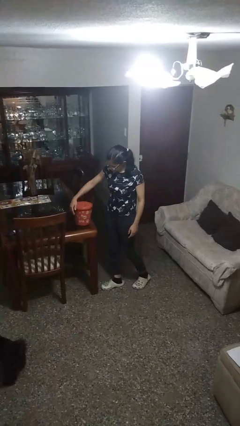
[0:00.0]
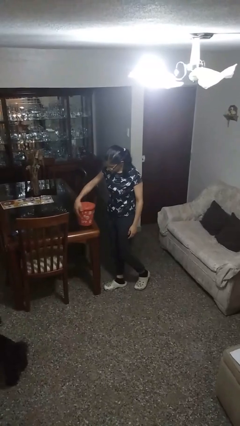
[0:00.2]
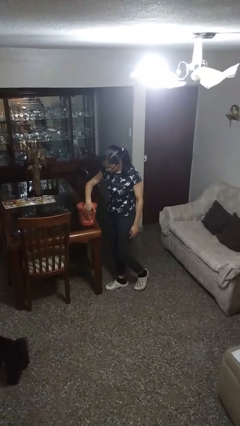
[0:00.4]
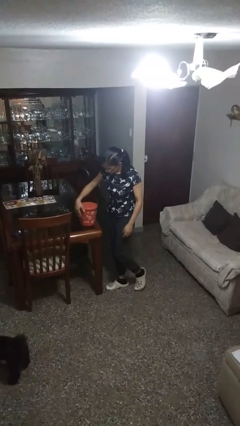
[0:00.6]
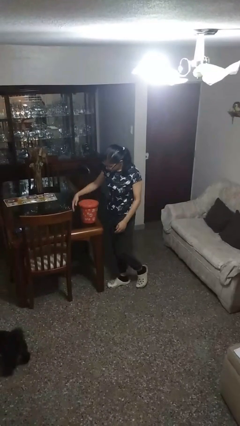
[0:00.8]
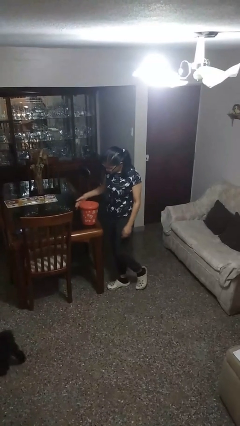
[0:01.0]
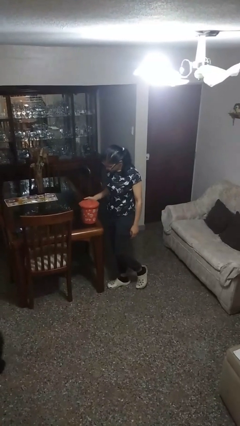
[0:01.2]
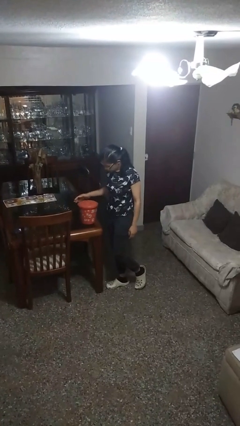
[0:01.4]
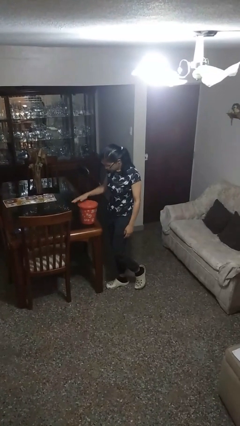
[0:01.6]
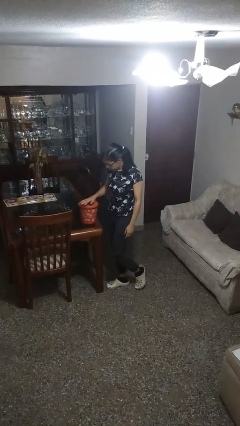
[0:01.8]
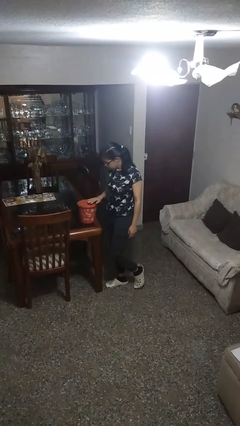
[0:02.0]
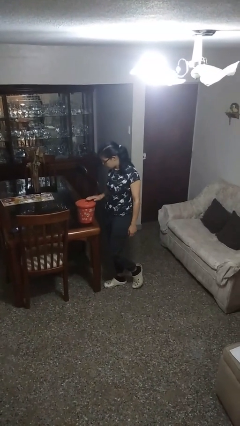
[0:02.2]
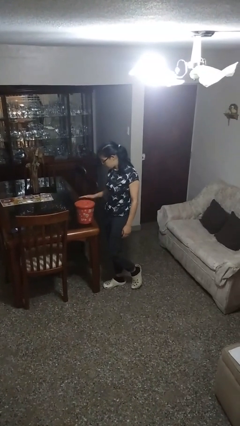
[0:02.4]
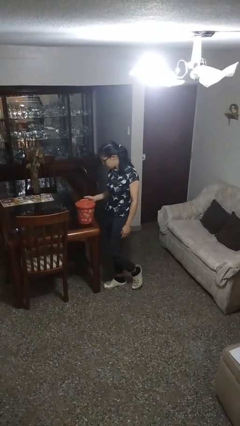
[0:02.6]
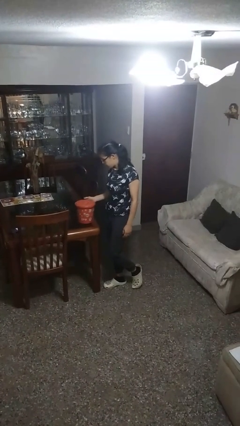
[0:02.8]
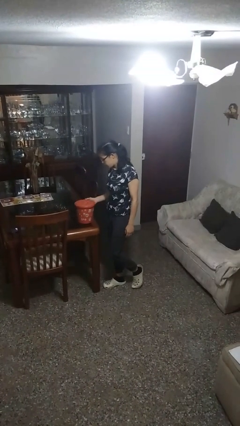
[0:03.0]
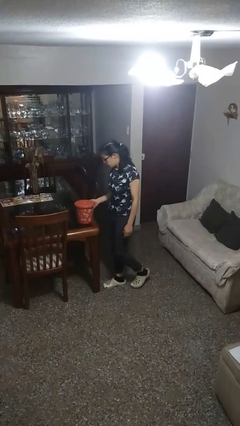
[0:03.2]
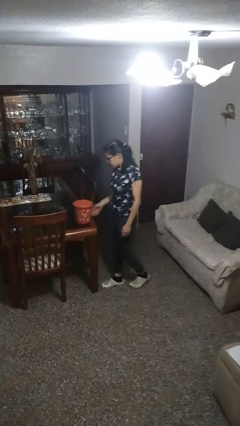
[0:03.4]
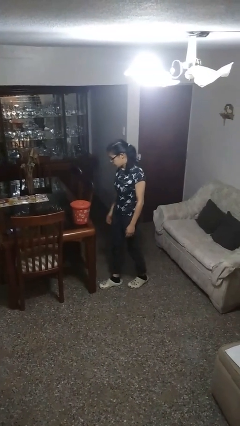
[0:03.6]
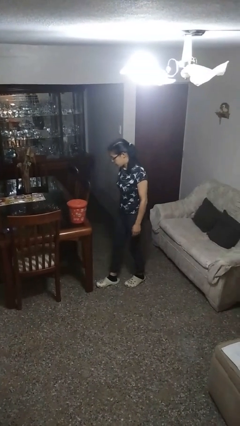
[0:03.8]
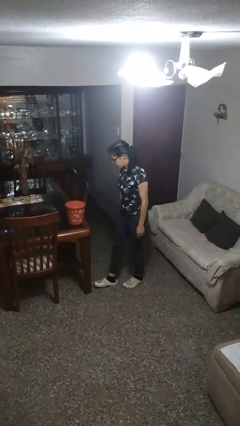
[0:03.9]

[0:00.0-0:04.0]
person waves hand over object

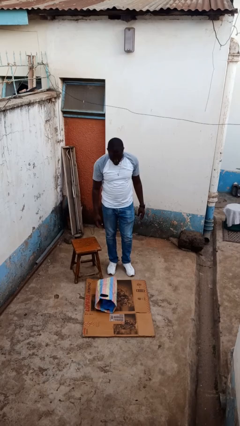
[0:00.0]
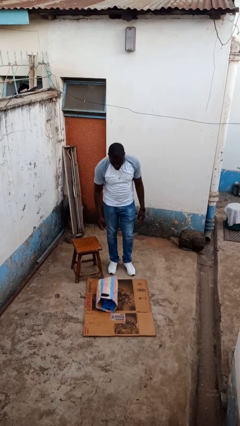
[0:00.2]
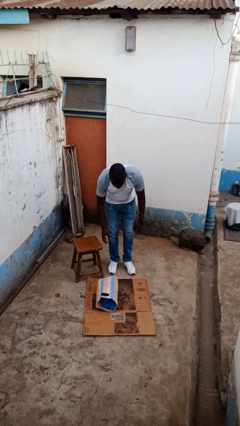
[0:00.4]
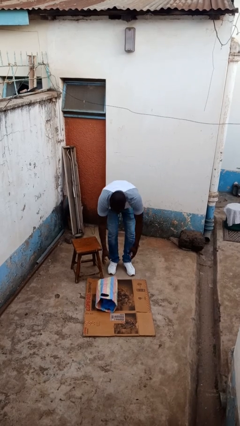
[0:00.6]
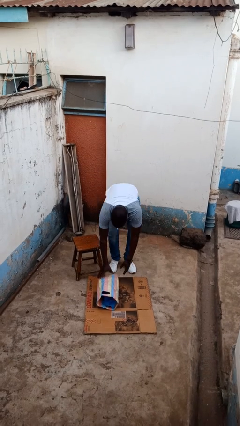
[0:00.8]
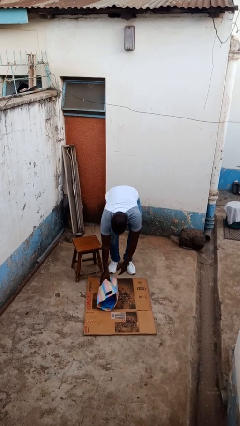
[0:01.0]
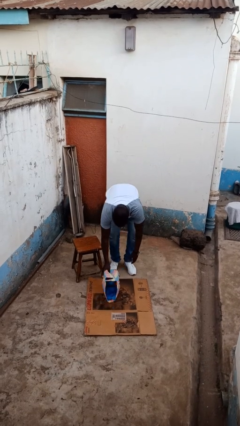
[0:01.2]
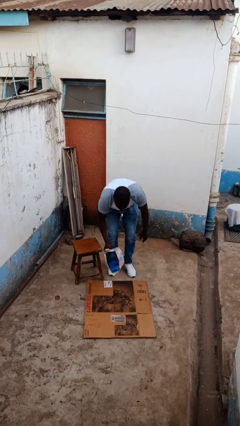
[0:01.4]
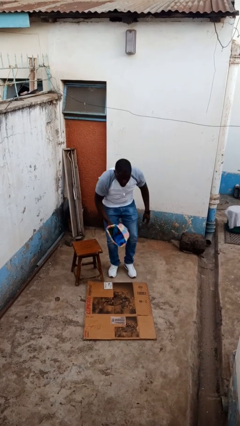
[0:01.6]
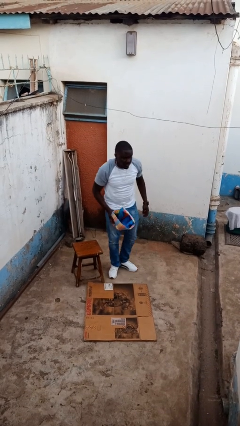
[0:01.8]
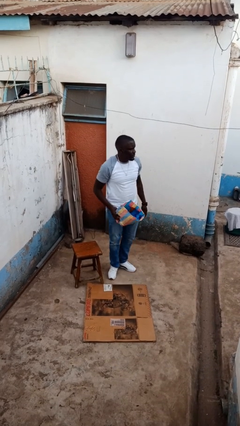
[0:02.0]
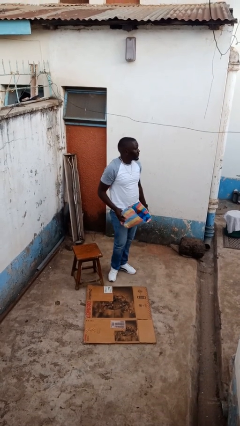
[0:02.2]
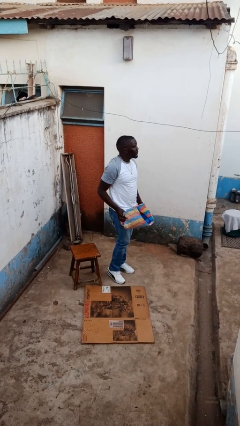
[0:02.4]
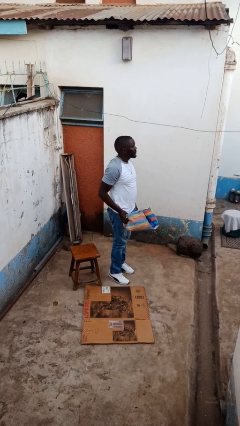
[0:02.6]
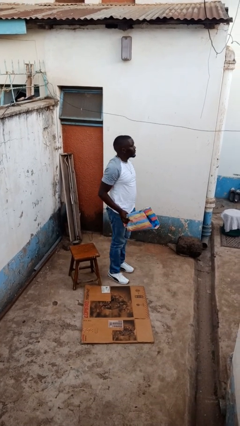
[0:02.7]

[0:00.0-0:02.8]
person picks up object from floor

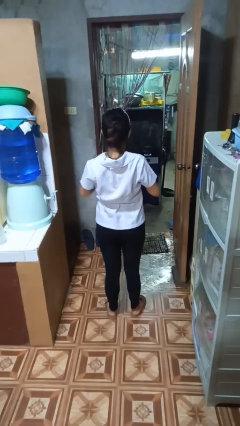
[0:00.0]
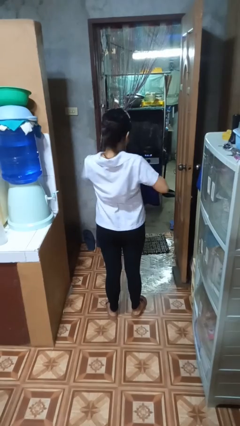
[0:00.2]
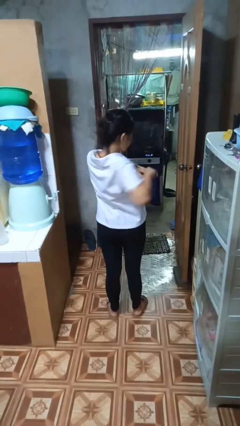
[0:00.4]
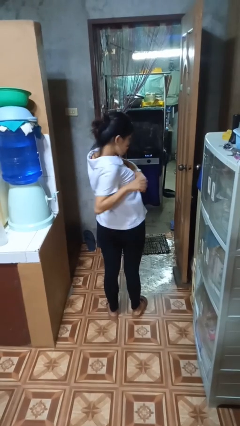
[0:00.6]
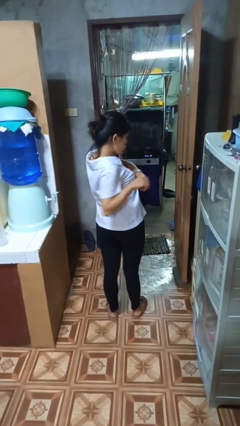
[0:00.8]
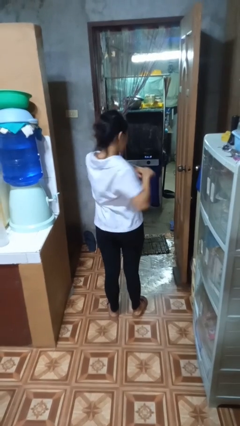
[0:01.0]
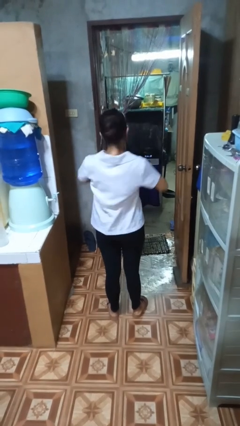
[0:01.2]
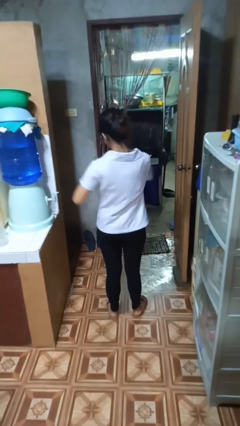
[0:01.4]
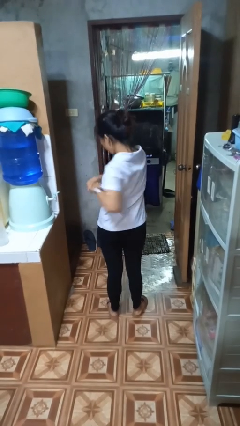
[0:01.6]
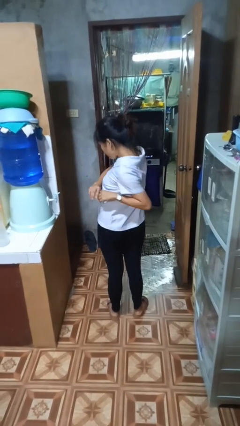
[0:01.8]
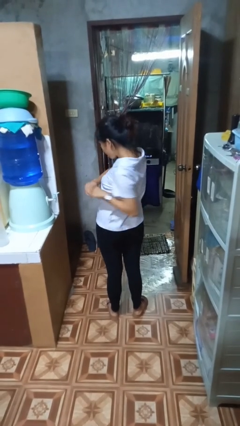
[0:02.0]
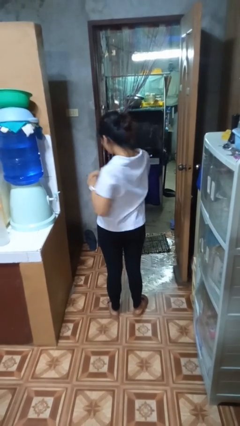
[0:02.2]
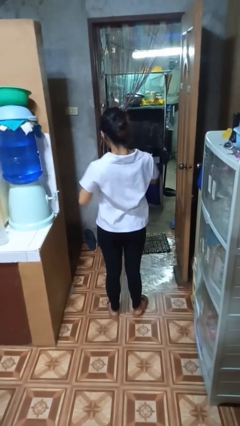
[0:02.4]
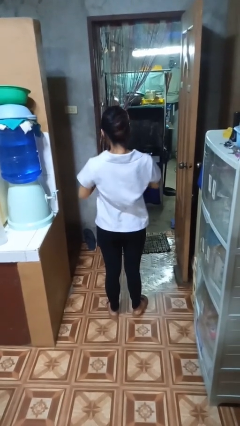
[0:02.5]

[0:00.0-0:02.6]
person stretches arms to side

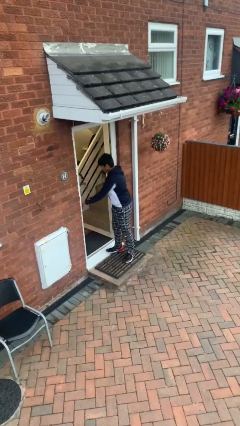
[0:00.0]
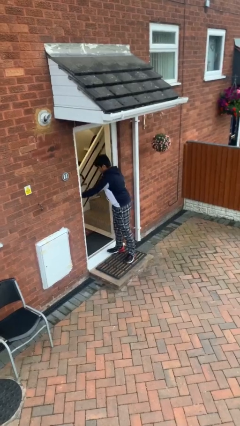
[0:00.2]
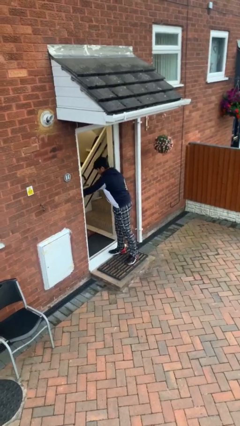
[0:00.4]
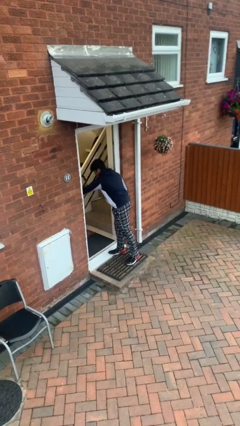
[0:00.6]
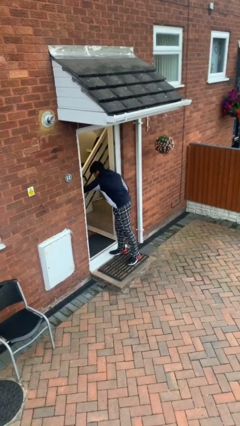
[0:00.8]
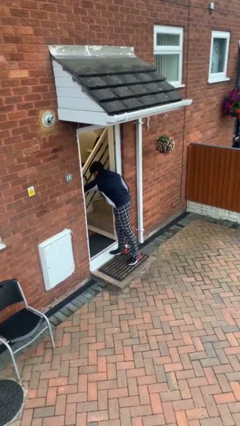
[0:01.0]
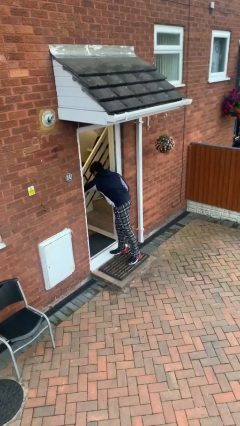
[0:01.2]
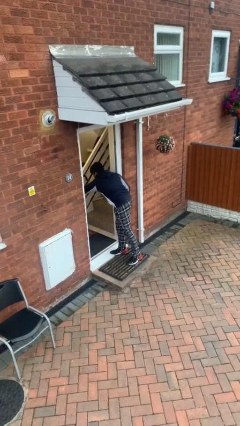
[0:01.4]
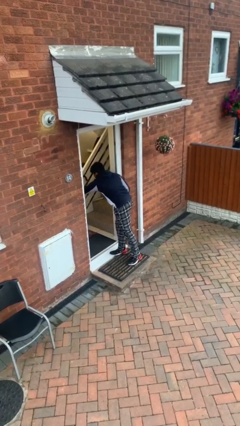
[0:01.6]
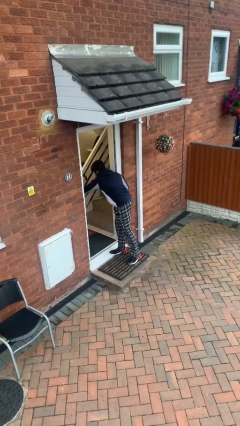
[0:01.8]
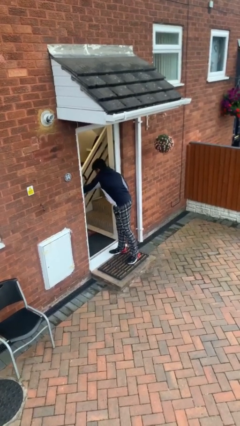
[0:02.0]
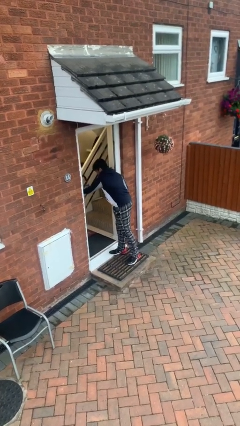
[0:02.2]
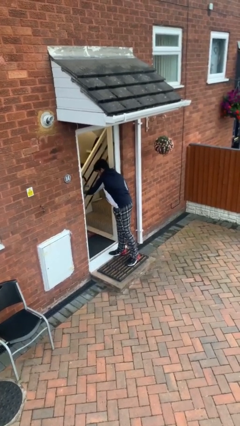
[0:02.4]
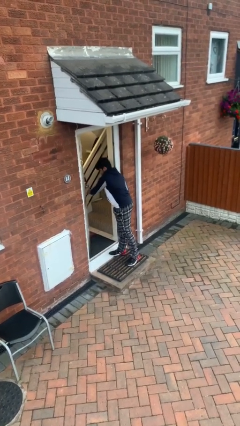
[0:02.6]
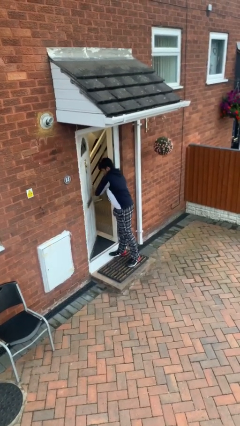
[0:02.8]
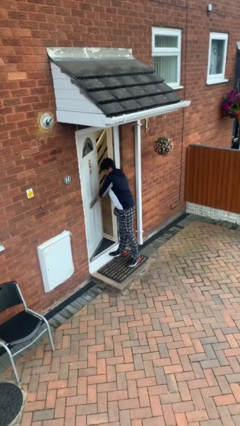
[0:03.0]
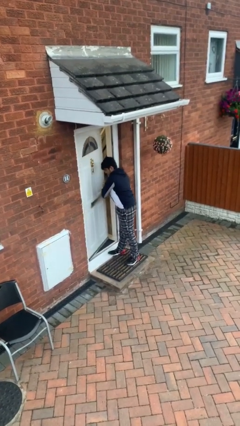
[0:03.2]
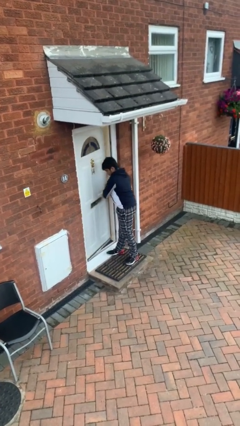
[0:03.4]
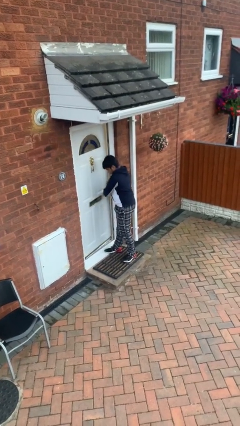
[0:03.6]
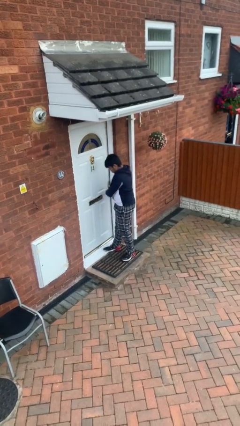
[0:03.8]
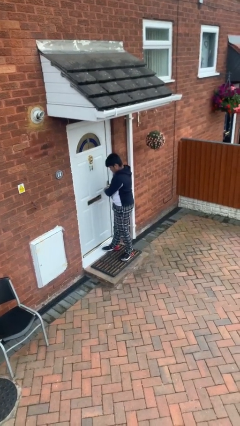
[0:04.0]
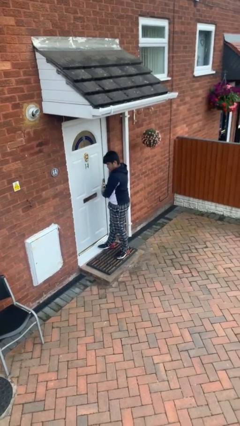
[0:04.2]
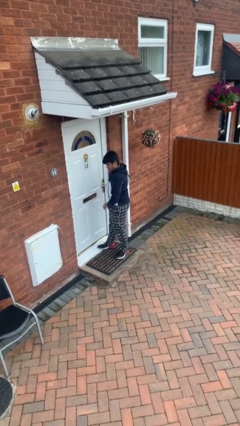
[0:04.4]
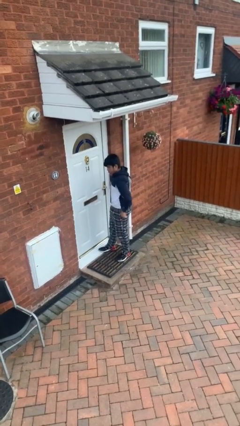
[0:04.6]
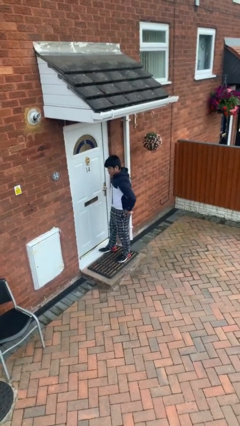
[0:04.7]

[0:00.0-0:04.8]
person closes facility door

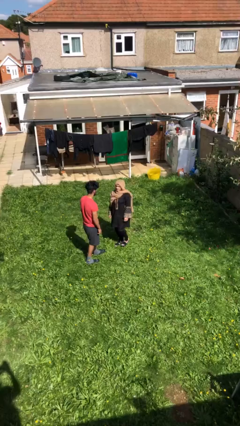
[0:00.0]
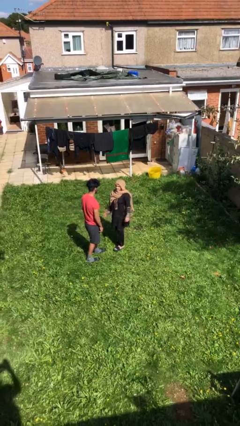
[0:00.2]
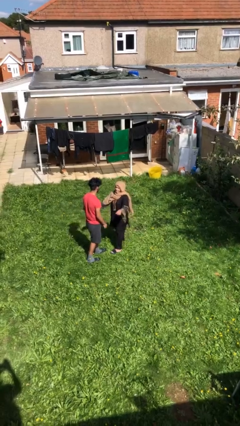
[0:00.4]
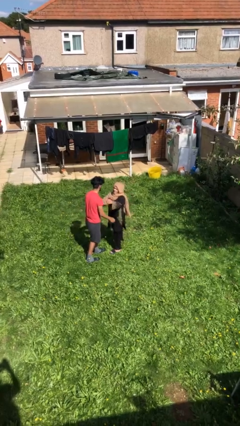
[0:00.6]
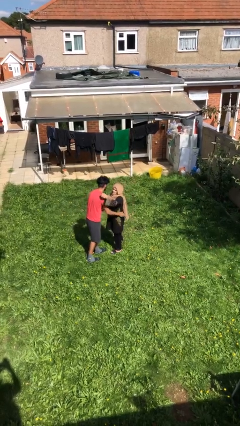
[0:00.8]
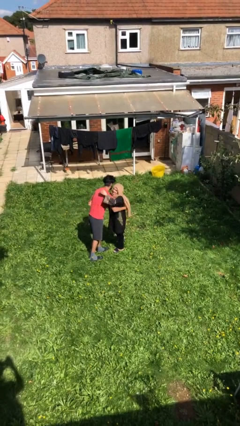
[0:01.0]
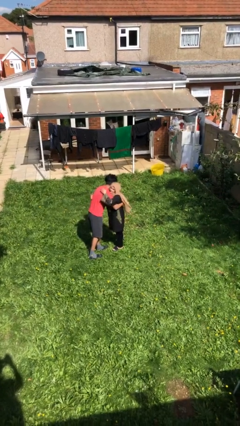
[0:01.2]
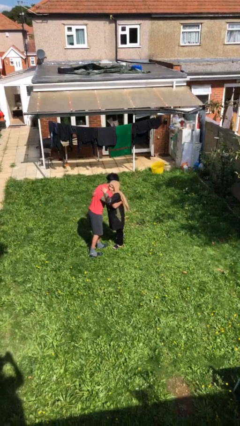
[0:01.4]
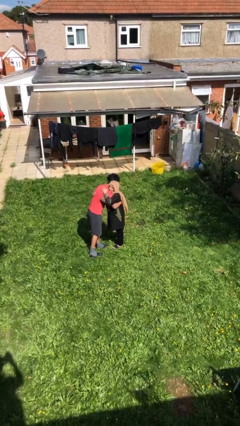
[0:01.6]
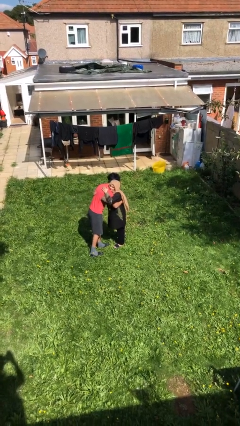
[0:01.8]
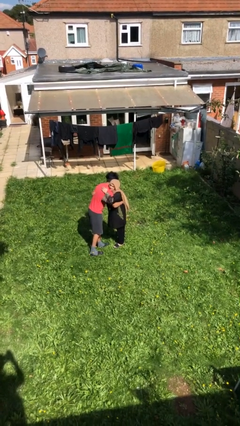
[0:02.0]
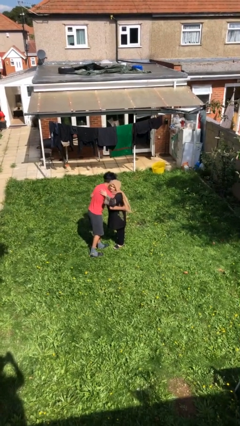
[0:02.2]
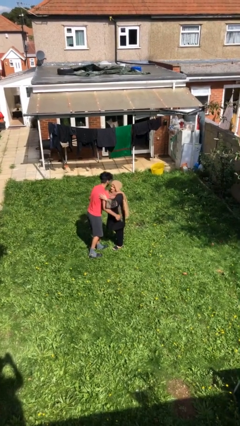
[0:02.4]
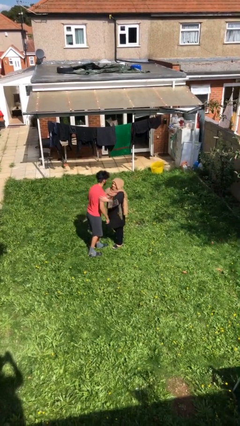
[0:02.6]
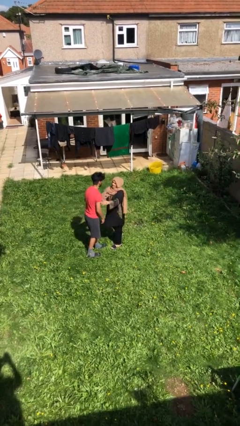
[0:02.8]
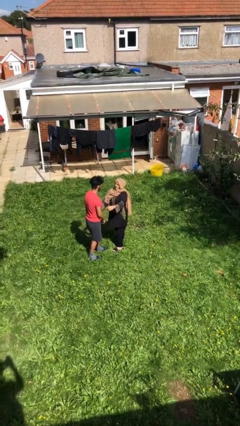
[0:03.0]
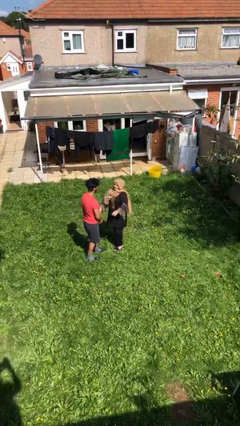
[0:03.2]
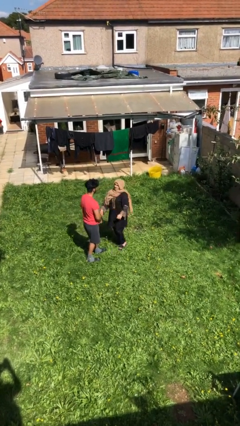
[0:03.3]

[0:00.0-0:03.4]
person embraces person
